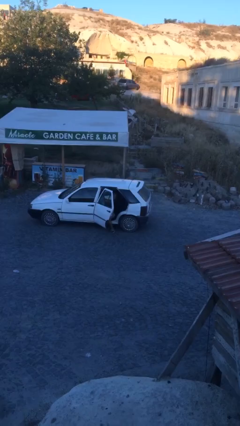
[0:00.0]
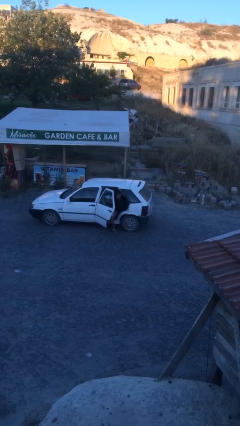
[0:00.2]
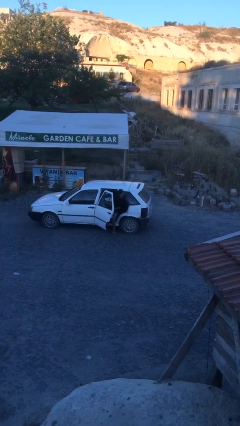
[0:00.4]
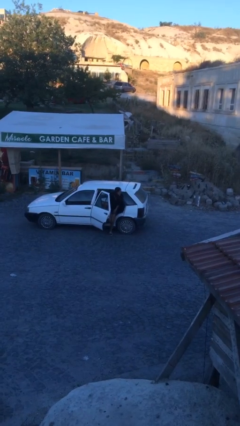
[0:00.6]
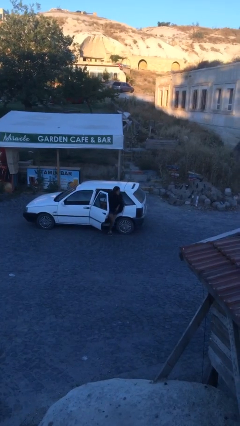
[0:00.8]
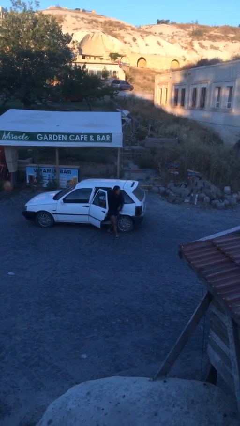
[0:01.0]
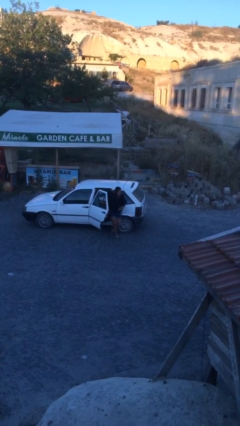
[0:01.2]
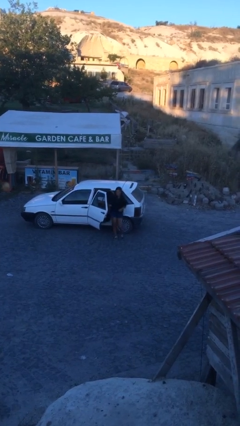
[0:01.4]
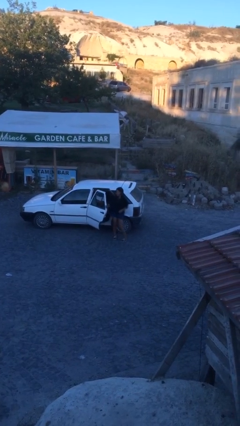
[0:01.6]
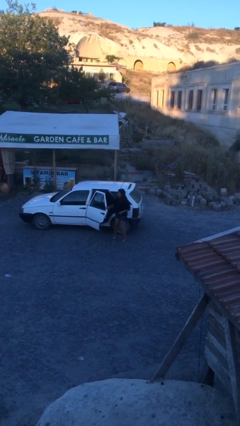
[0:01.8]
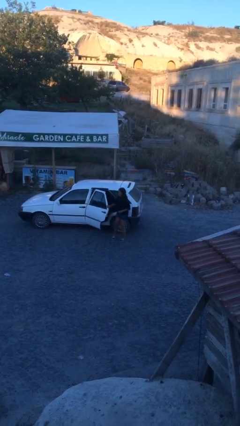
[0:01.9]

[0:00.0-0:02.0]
person exits car

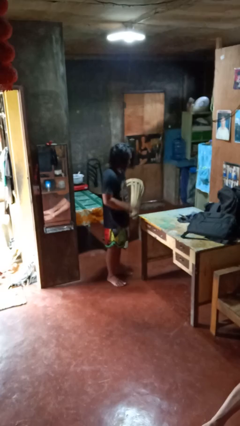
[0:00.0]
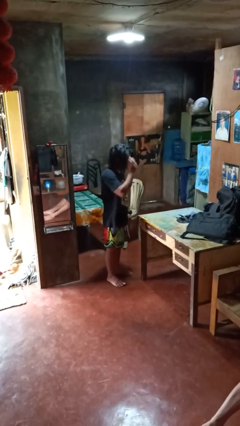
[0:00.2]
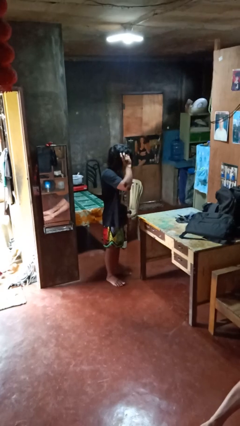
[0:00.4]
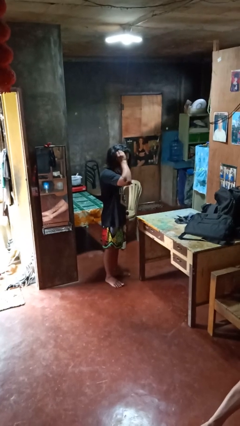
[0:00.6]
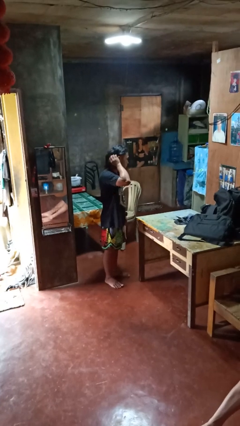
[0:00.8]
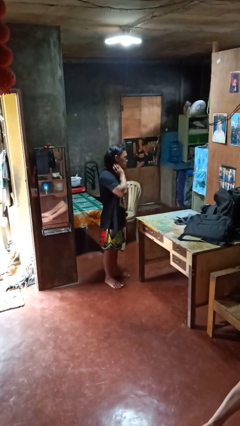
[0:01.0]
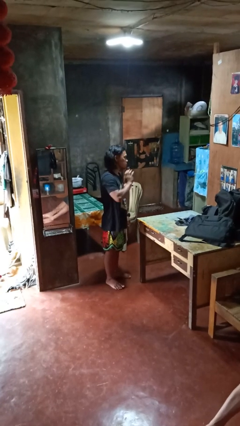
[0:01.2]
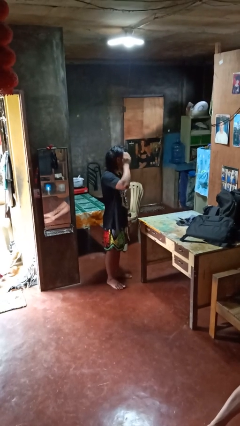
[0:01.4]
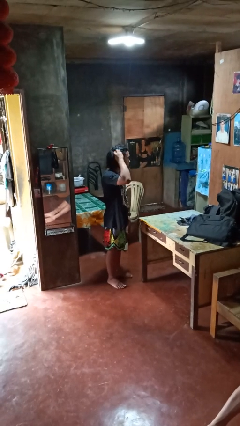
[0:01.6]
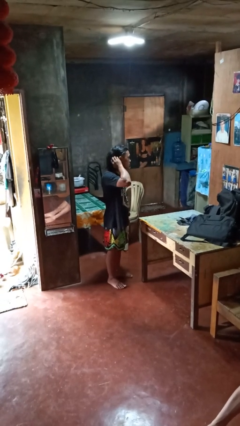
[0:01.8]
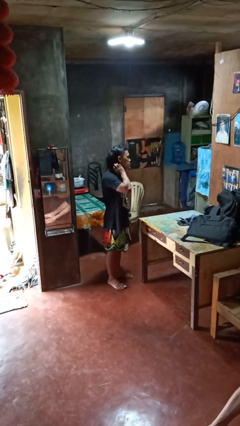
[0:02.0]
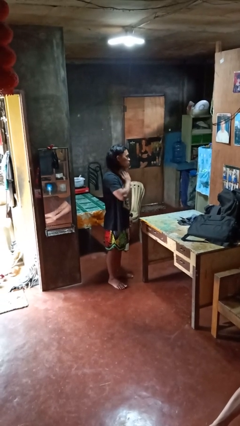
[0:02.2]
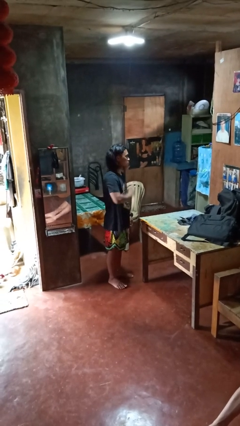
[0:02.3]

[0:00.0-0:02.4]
person strokes hair

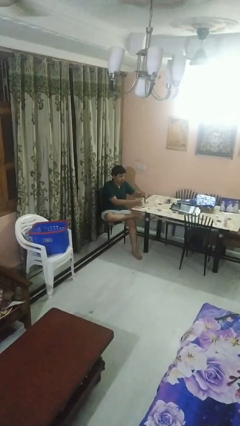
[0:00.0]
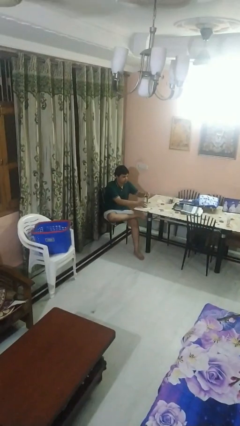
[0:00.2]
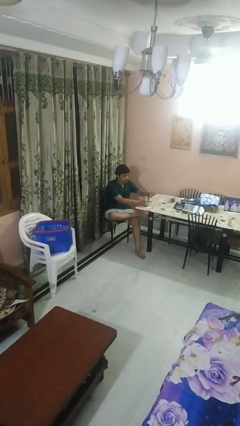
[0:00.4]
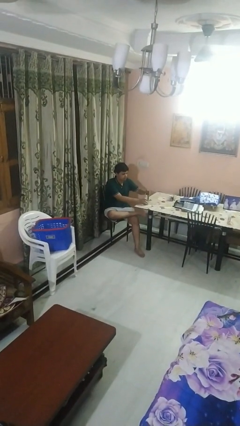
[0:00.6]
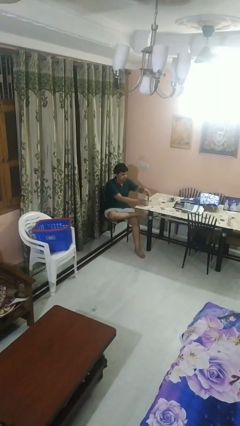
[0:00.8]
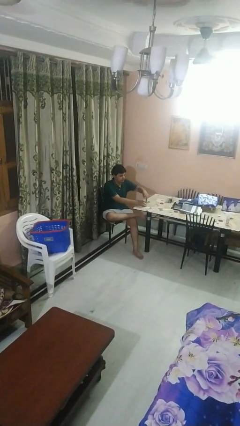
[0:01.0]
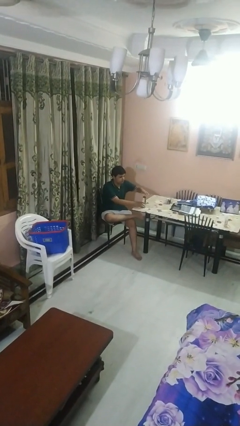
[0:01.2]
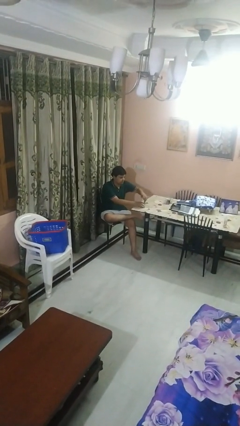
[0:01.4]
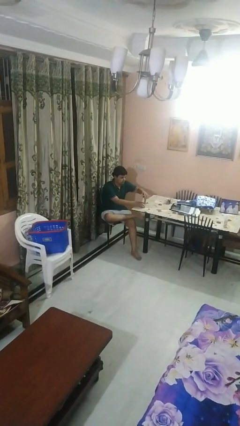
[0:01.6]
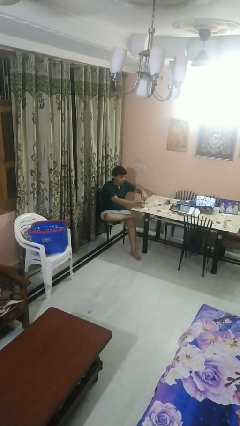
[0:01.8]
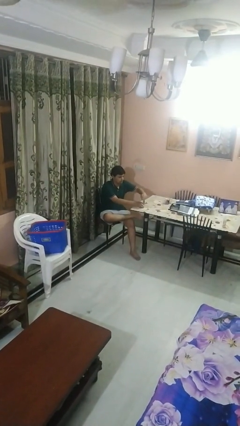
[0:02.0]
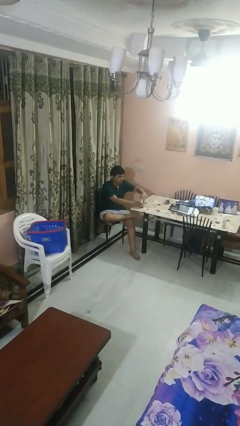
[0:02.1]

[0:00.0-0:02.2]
person screws lid to bottle

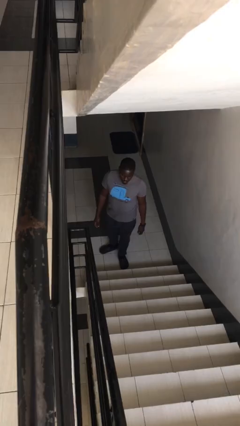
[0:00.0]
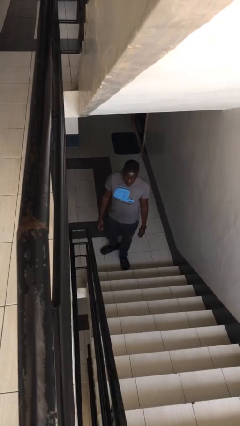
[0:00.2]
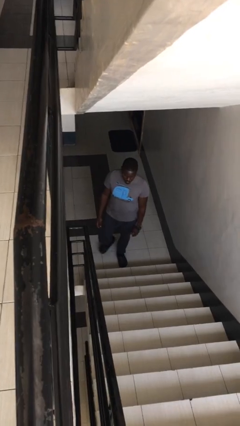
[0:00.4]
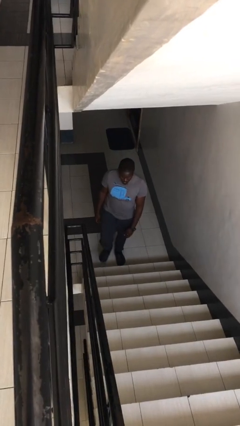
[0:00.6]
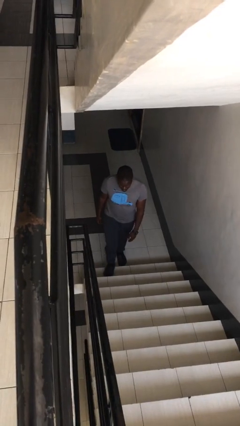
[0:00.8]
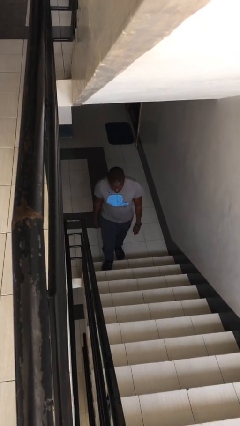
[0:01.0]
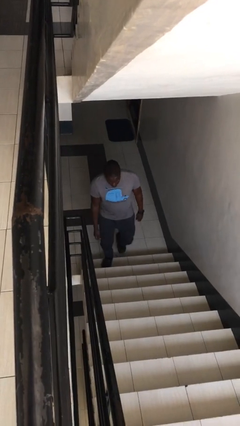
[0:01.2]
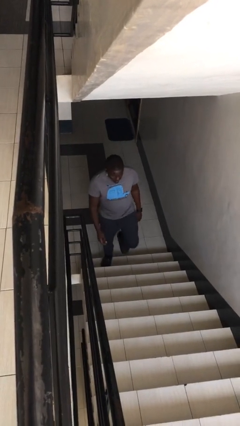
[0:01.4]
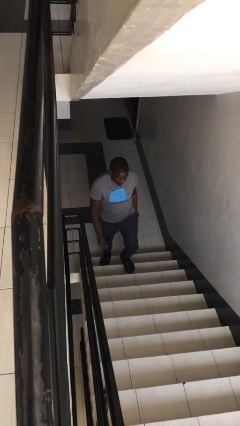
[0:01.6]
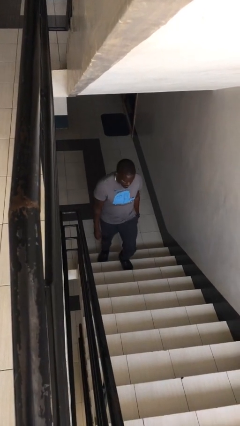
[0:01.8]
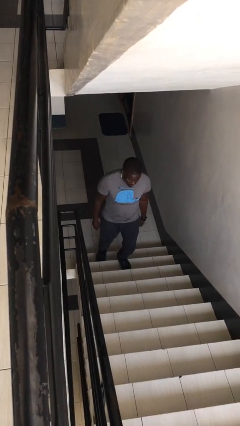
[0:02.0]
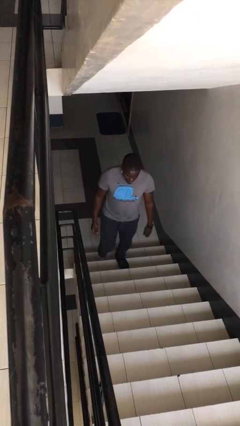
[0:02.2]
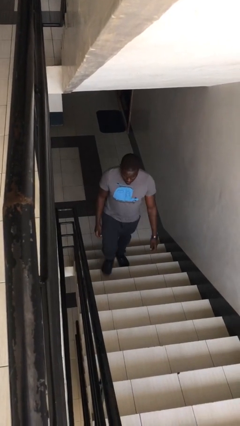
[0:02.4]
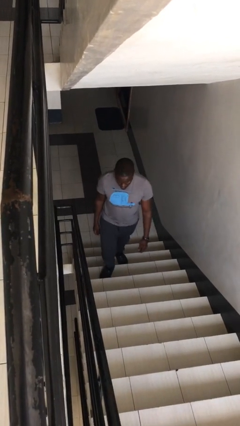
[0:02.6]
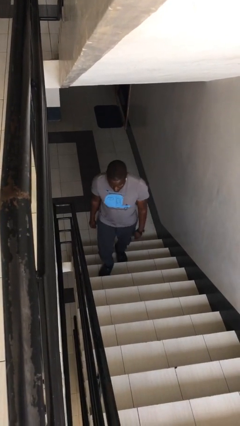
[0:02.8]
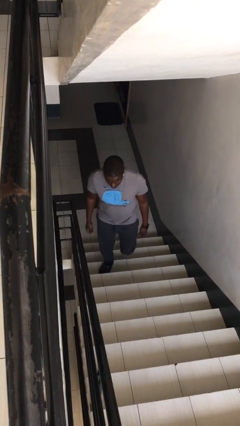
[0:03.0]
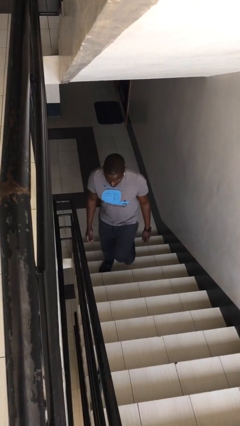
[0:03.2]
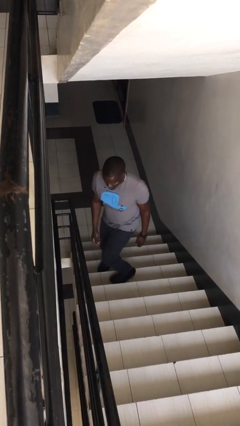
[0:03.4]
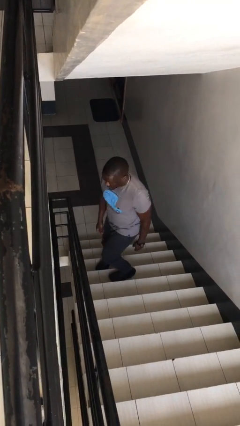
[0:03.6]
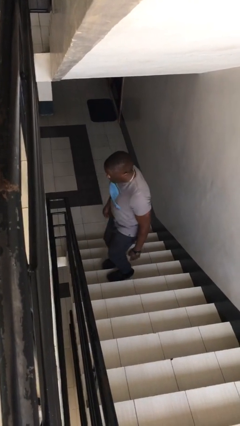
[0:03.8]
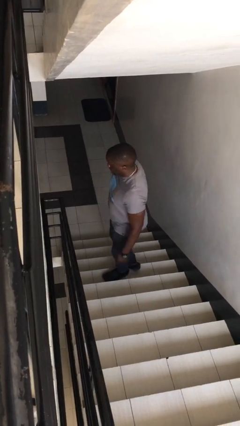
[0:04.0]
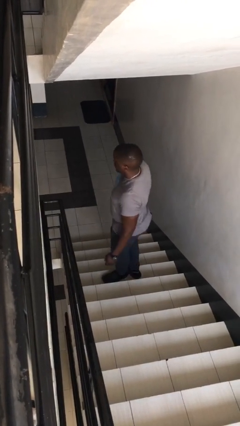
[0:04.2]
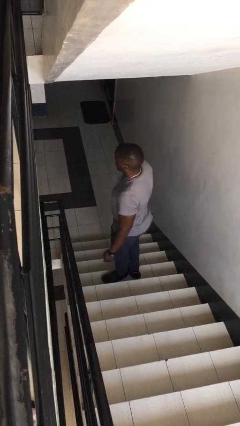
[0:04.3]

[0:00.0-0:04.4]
person climbs up stairs

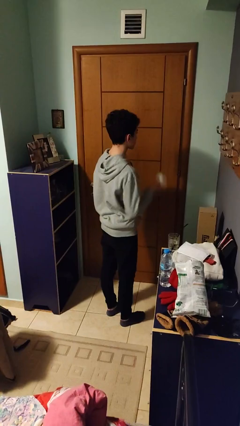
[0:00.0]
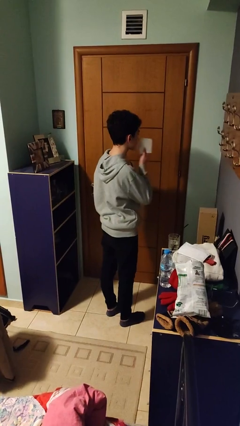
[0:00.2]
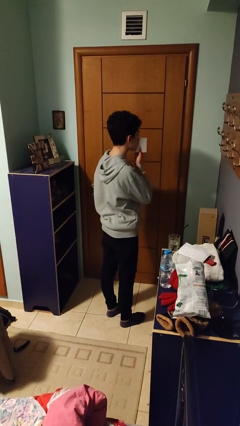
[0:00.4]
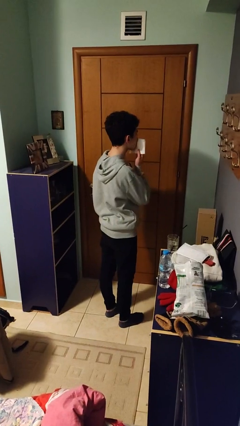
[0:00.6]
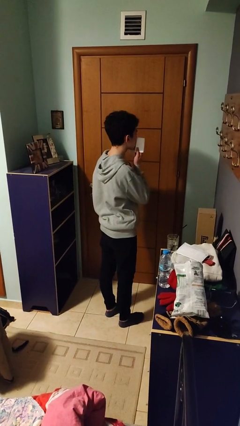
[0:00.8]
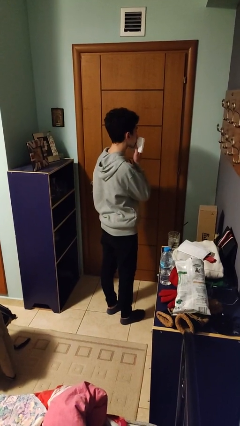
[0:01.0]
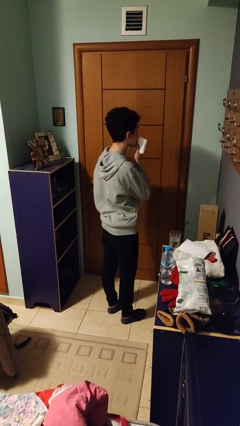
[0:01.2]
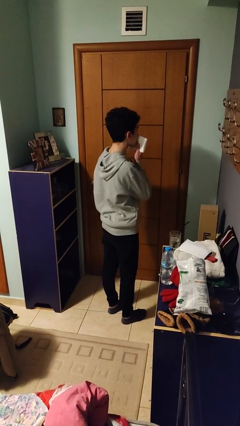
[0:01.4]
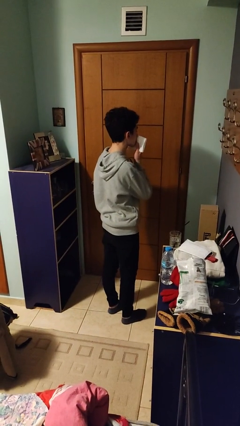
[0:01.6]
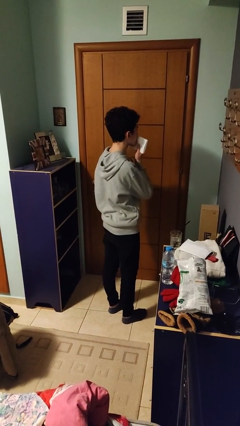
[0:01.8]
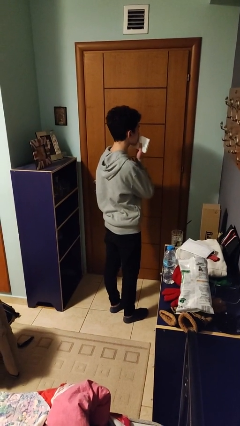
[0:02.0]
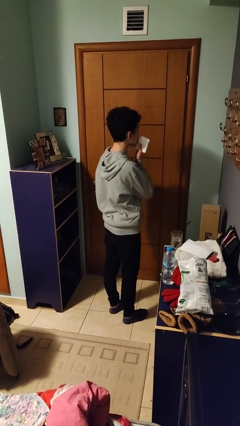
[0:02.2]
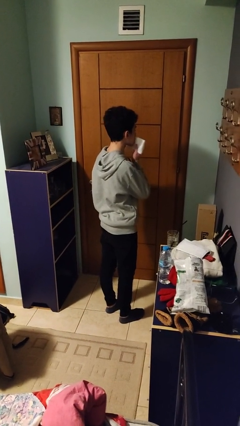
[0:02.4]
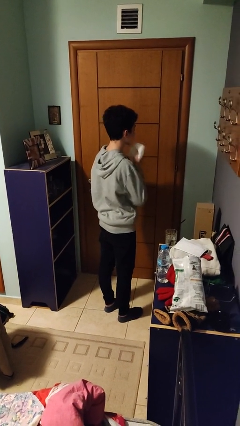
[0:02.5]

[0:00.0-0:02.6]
person wipes mouth with napkin

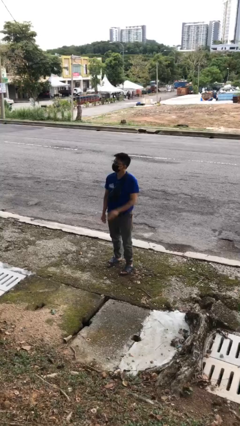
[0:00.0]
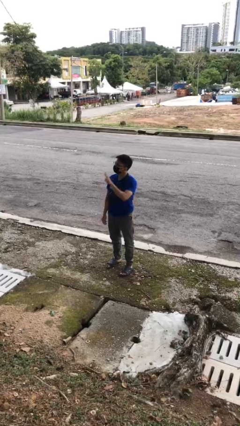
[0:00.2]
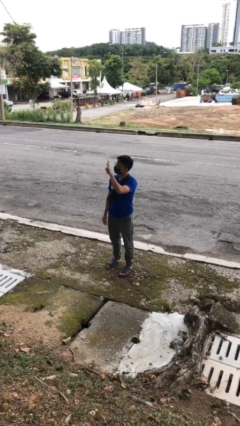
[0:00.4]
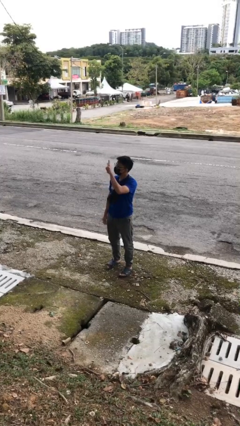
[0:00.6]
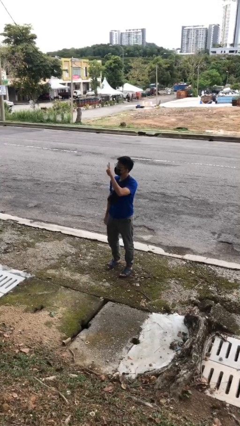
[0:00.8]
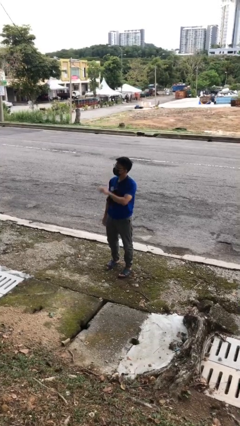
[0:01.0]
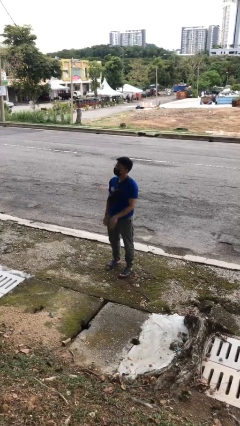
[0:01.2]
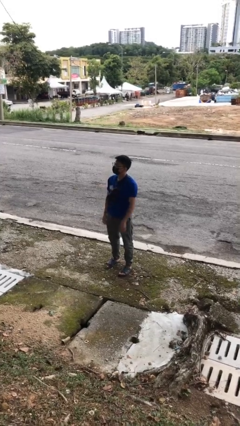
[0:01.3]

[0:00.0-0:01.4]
person gestures number three

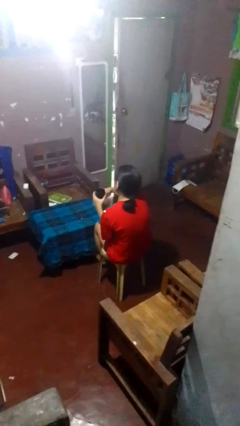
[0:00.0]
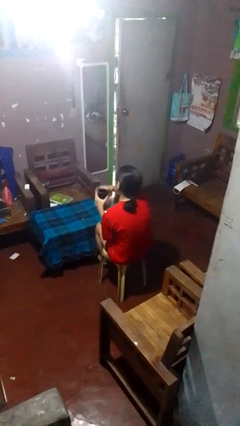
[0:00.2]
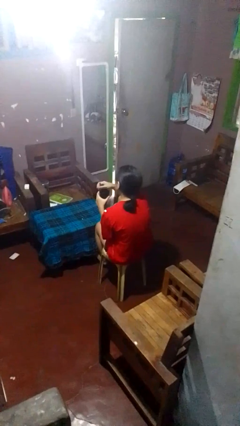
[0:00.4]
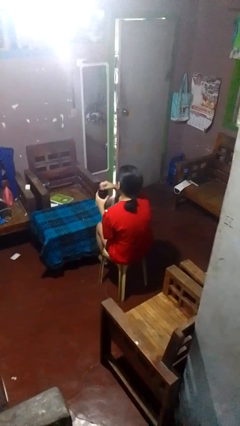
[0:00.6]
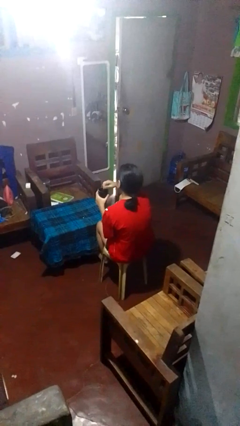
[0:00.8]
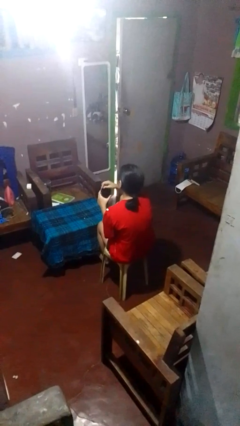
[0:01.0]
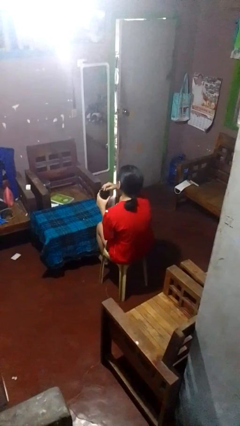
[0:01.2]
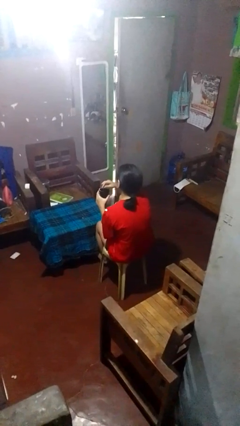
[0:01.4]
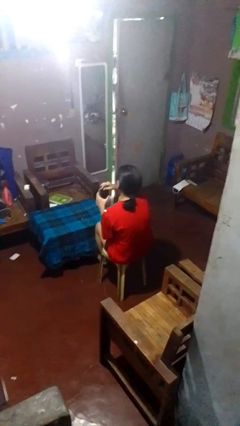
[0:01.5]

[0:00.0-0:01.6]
person stirs mug

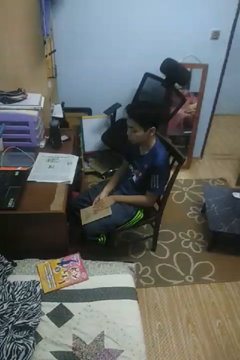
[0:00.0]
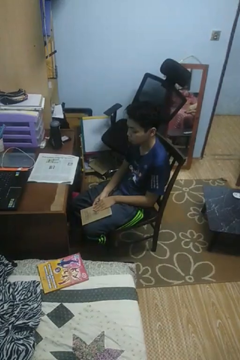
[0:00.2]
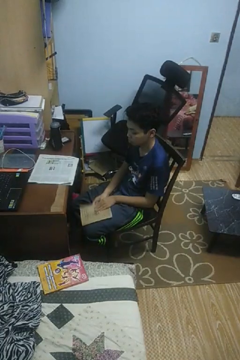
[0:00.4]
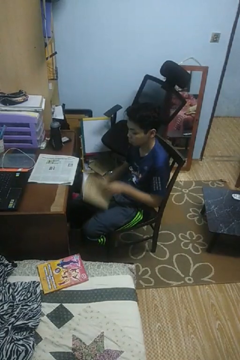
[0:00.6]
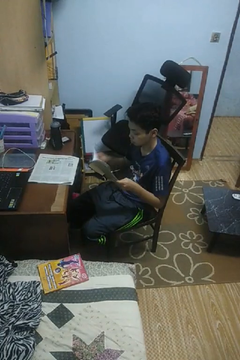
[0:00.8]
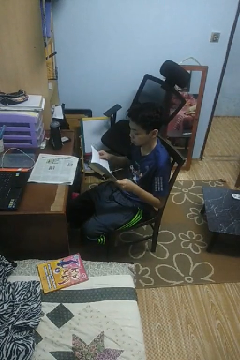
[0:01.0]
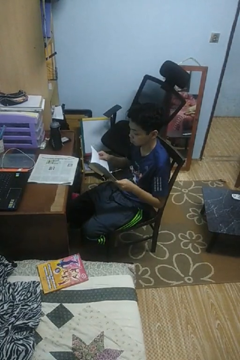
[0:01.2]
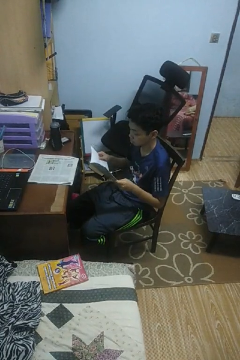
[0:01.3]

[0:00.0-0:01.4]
person reads book
